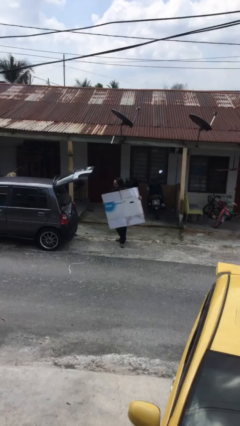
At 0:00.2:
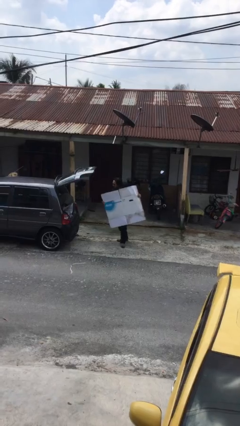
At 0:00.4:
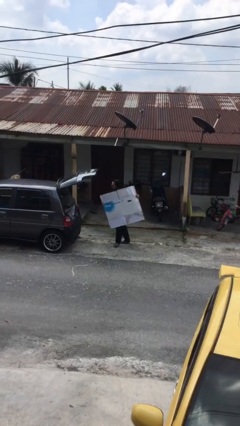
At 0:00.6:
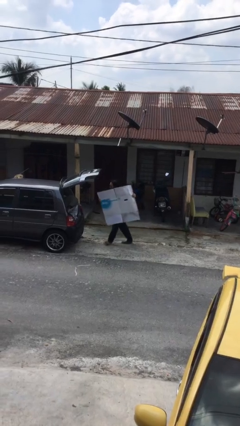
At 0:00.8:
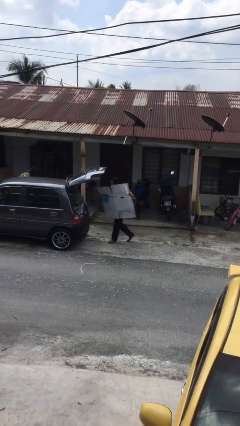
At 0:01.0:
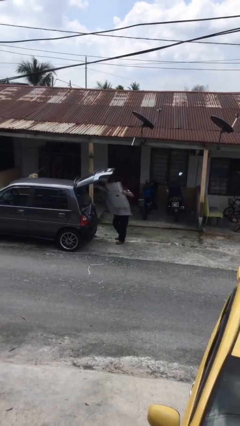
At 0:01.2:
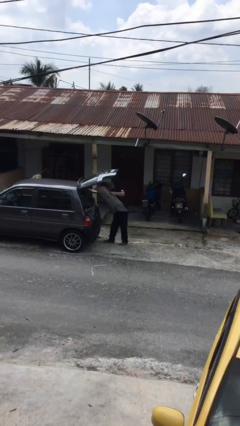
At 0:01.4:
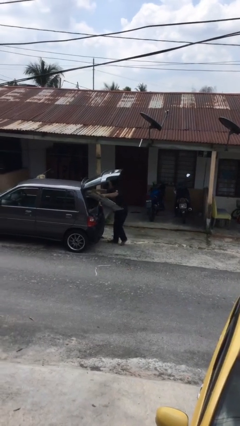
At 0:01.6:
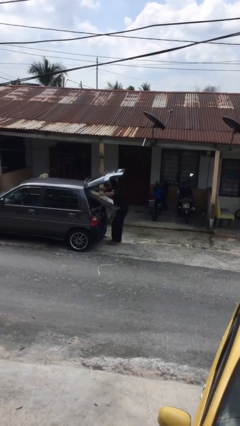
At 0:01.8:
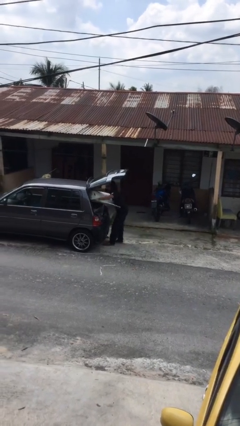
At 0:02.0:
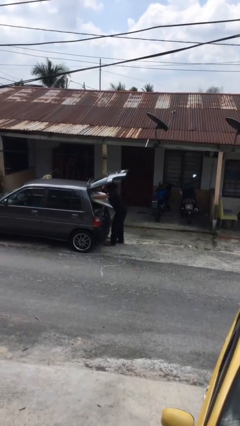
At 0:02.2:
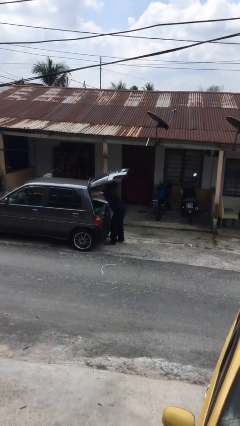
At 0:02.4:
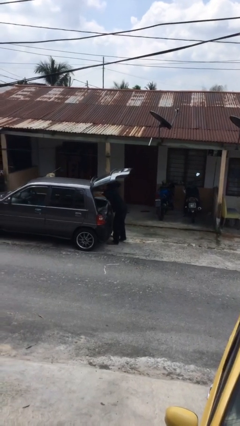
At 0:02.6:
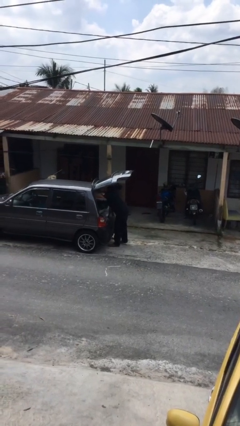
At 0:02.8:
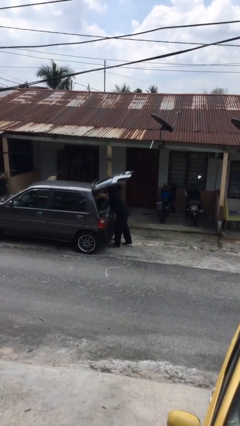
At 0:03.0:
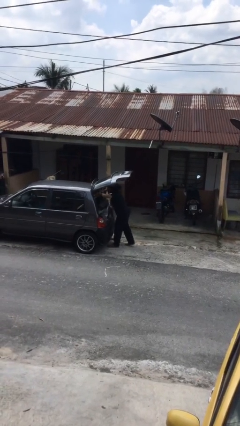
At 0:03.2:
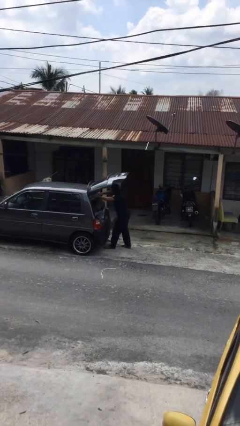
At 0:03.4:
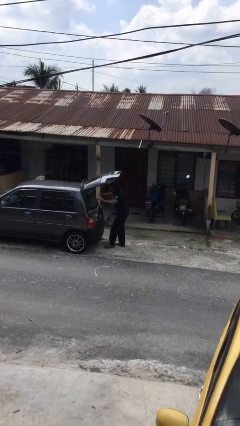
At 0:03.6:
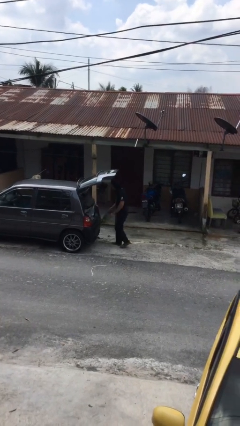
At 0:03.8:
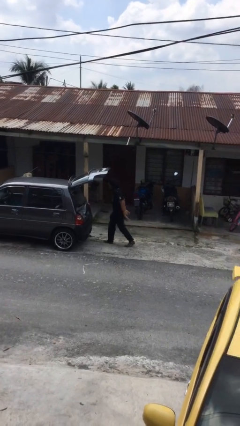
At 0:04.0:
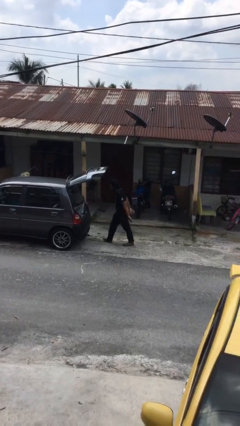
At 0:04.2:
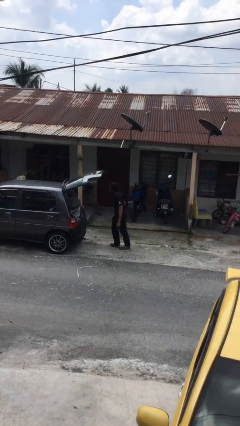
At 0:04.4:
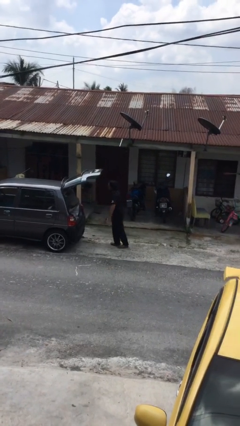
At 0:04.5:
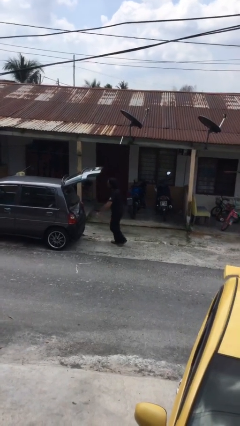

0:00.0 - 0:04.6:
person loads car

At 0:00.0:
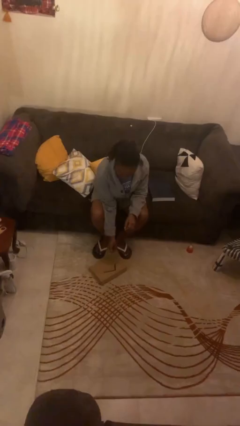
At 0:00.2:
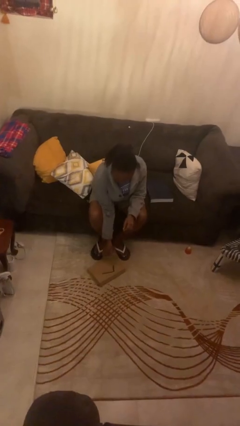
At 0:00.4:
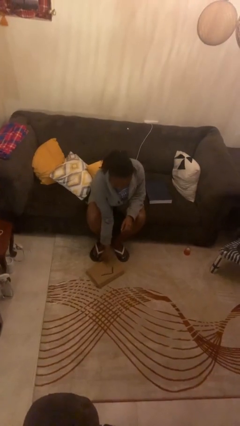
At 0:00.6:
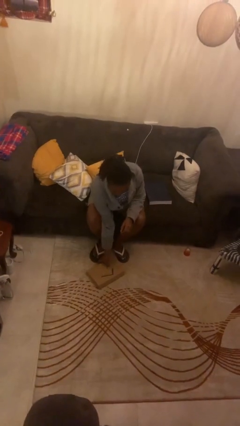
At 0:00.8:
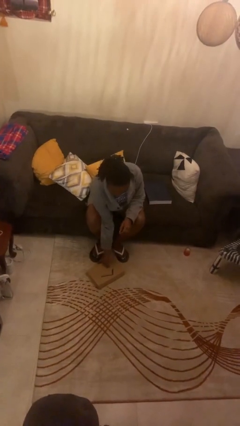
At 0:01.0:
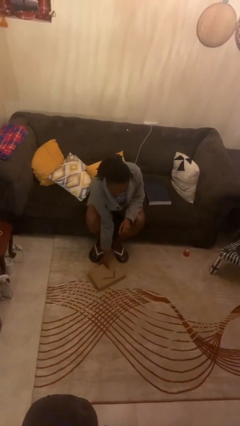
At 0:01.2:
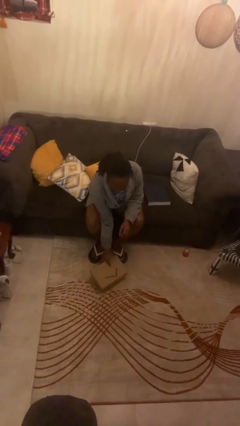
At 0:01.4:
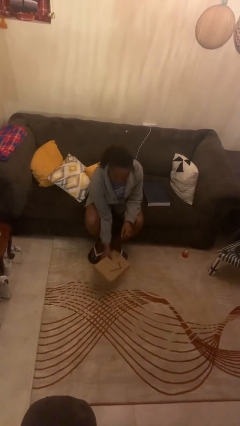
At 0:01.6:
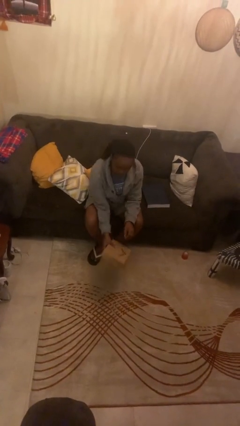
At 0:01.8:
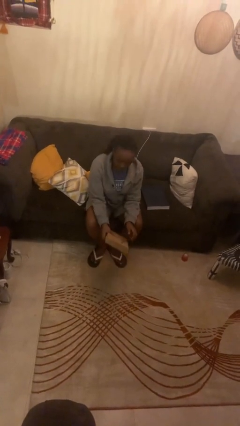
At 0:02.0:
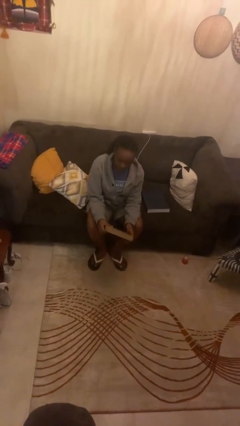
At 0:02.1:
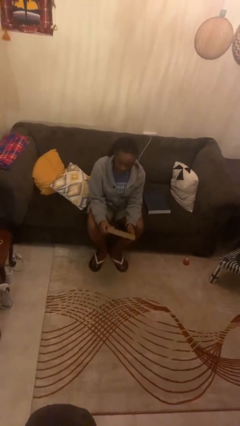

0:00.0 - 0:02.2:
person picks up object from floor

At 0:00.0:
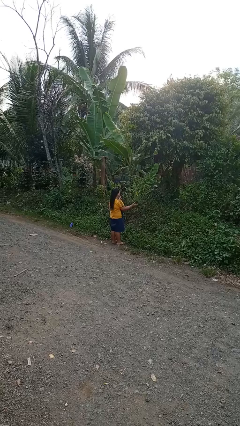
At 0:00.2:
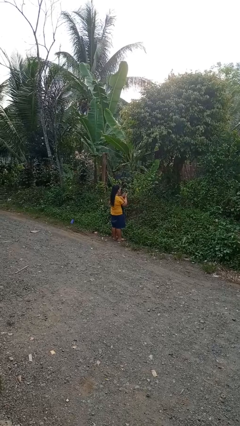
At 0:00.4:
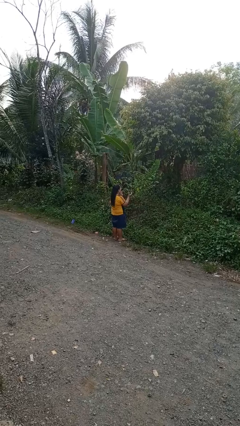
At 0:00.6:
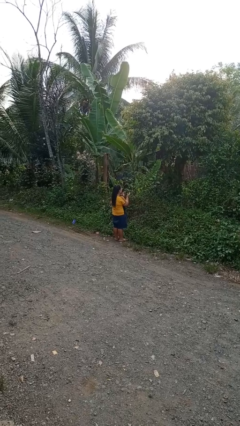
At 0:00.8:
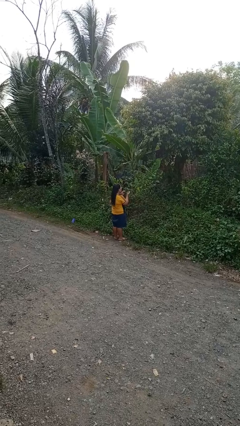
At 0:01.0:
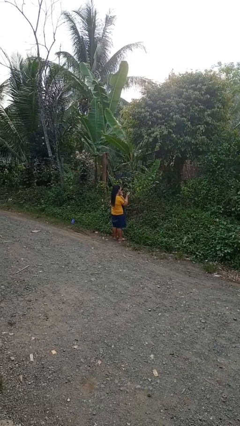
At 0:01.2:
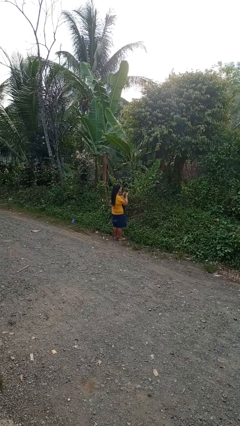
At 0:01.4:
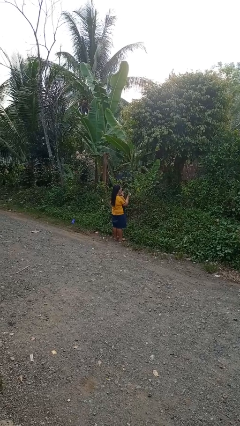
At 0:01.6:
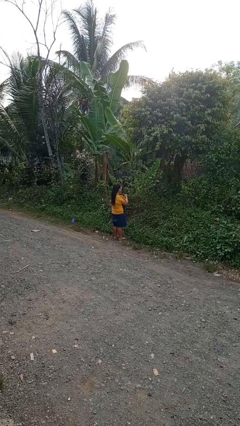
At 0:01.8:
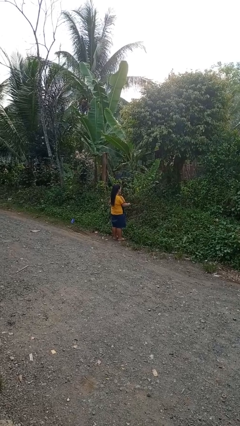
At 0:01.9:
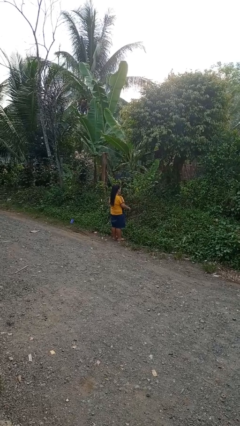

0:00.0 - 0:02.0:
person claps hands

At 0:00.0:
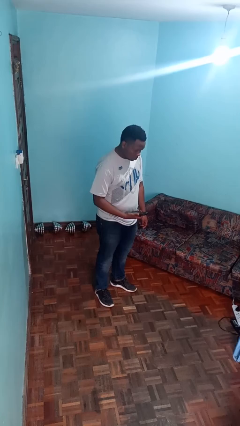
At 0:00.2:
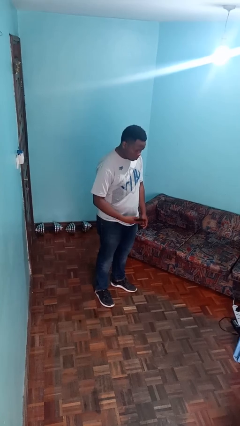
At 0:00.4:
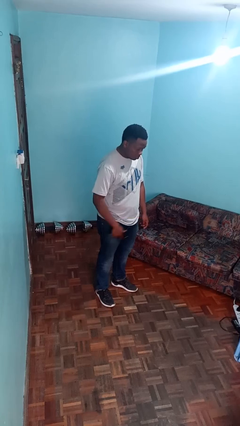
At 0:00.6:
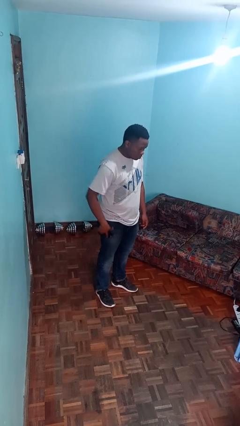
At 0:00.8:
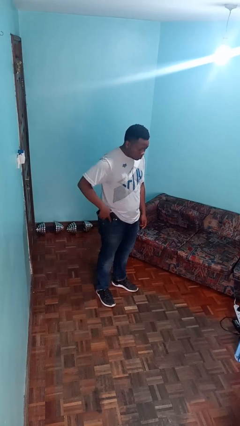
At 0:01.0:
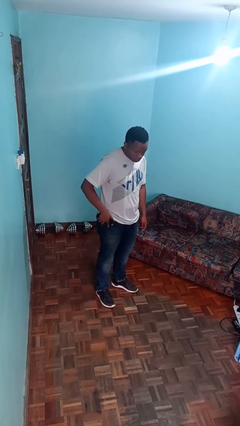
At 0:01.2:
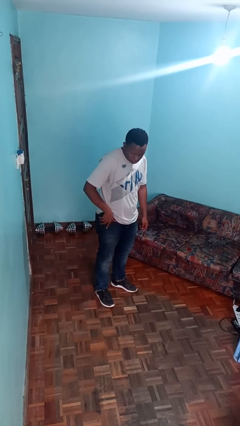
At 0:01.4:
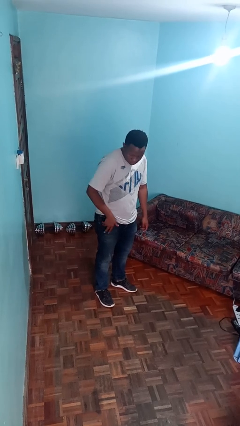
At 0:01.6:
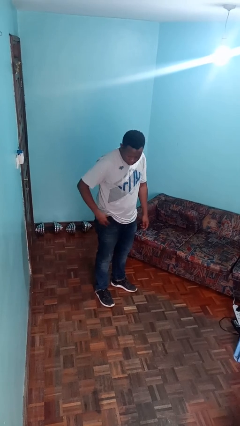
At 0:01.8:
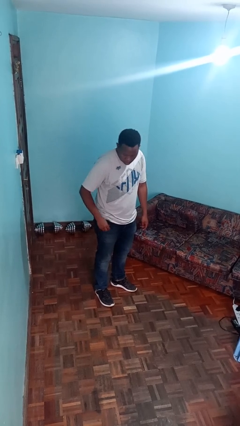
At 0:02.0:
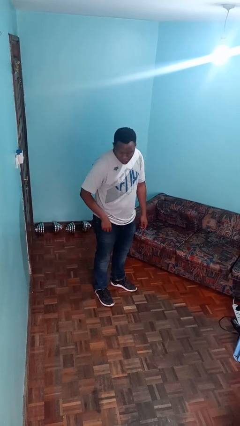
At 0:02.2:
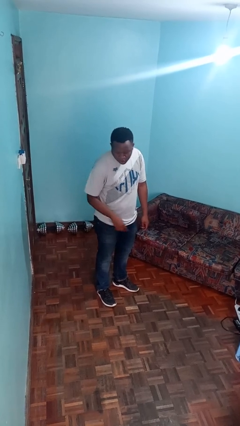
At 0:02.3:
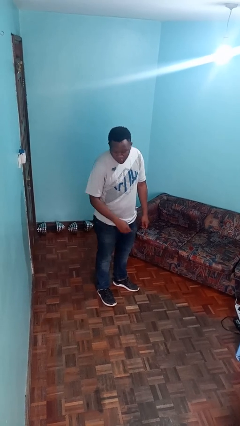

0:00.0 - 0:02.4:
person puts phone into pocket

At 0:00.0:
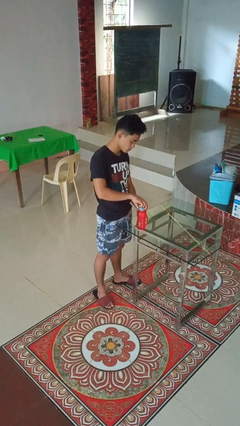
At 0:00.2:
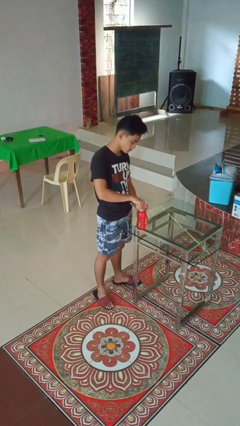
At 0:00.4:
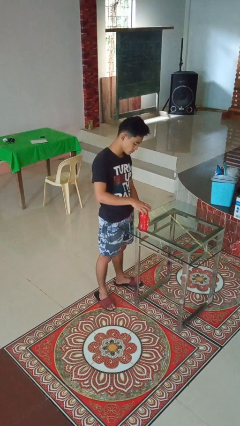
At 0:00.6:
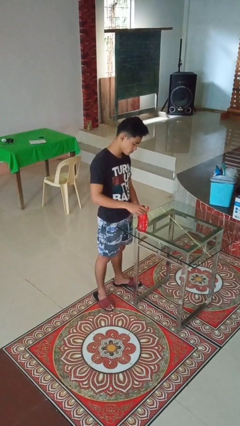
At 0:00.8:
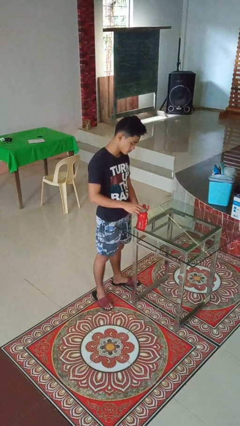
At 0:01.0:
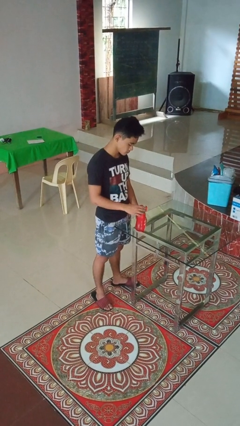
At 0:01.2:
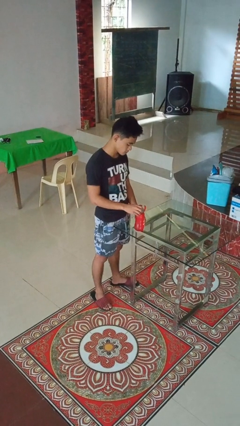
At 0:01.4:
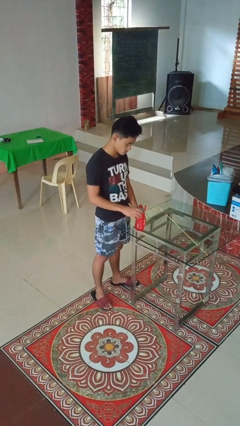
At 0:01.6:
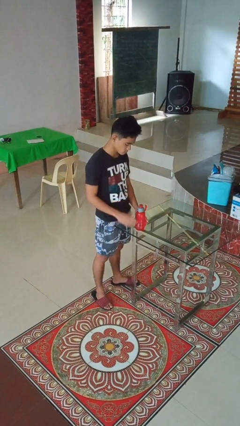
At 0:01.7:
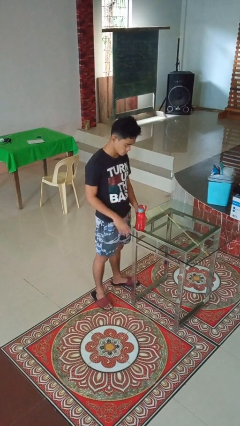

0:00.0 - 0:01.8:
person screws lid to bottle

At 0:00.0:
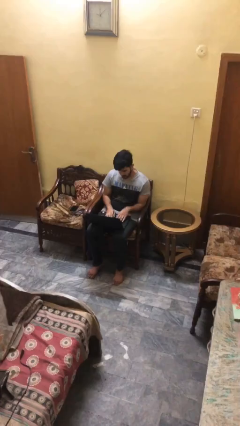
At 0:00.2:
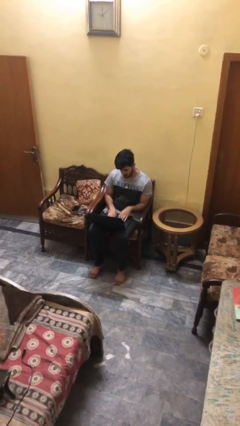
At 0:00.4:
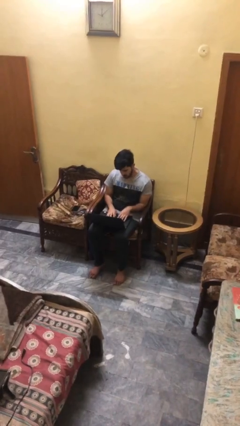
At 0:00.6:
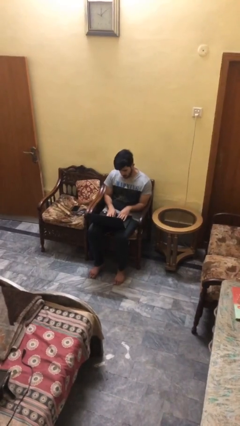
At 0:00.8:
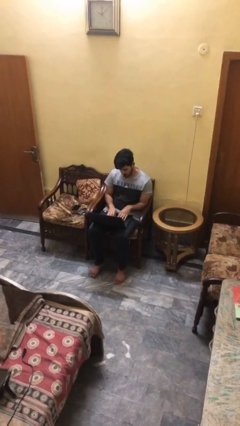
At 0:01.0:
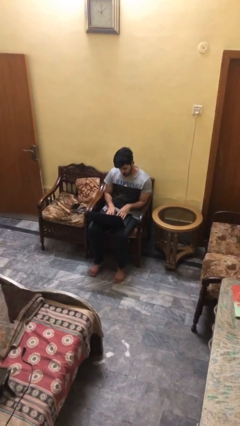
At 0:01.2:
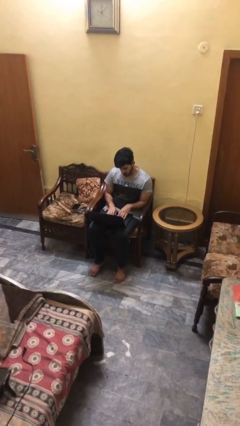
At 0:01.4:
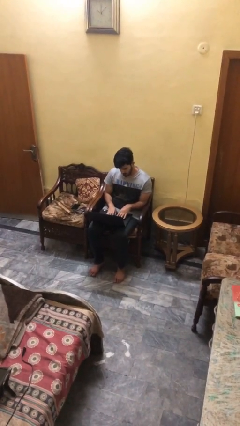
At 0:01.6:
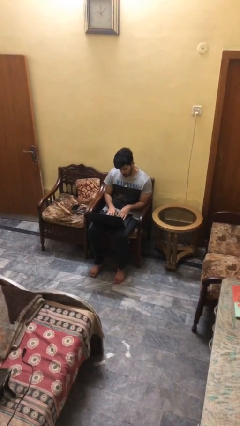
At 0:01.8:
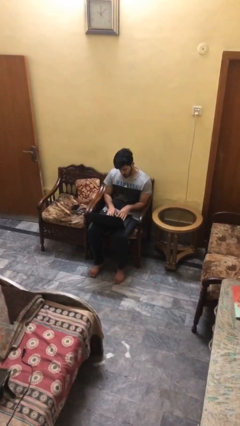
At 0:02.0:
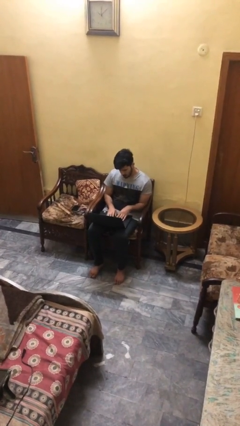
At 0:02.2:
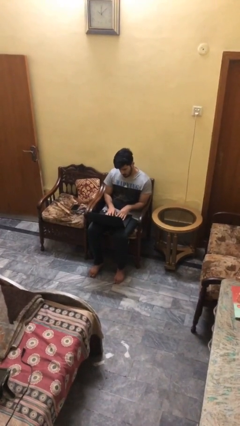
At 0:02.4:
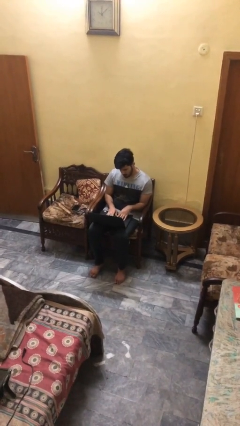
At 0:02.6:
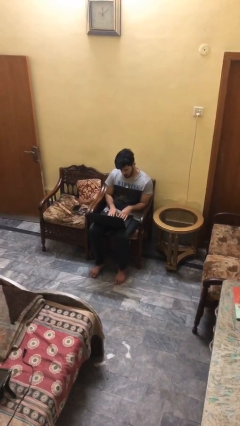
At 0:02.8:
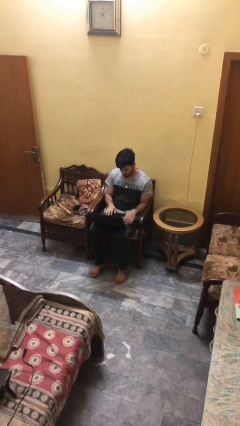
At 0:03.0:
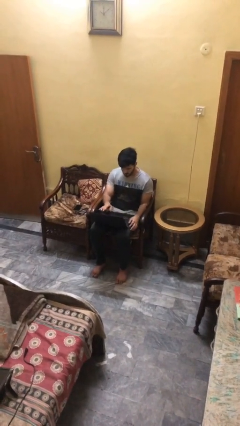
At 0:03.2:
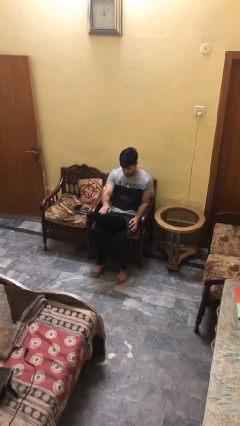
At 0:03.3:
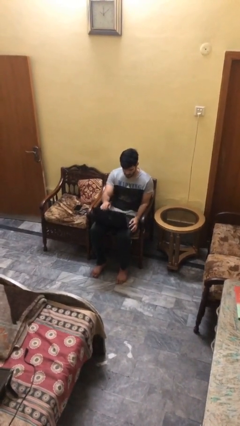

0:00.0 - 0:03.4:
person interacts with laptop

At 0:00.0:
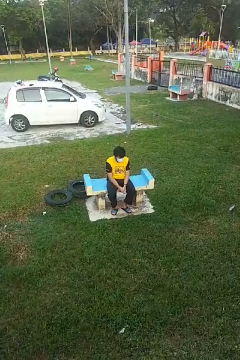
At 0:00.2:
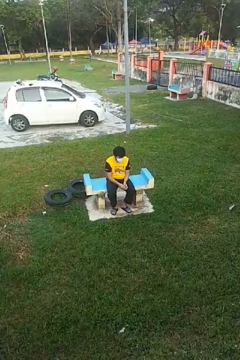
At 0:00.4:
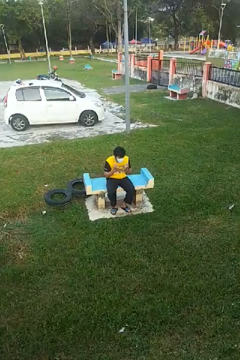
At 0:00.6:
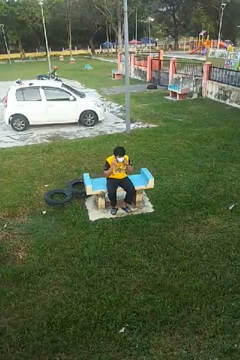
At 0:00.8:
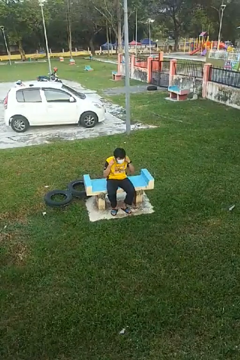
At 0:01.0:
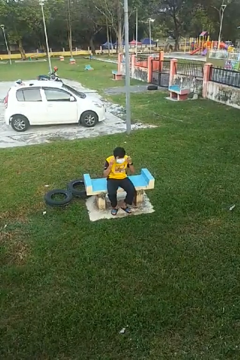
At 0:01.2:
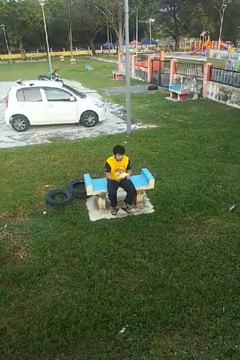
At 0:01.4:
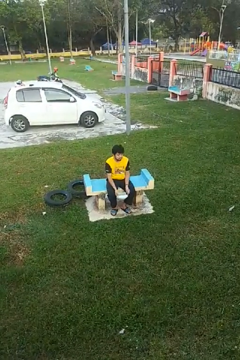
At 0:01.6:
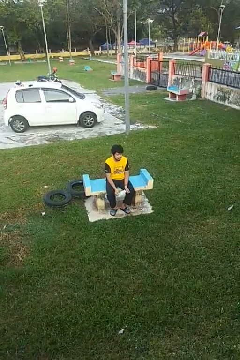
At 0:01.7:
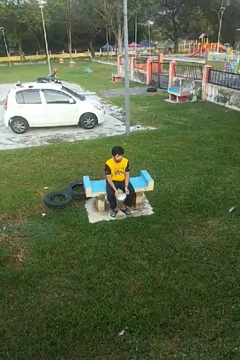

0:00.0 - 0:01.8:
person takes off facemask
